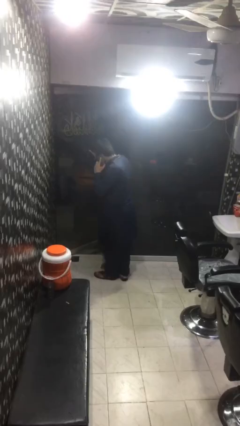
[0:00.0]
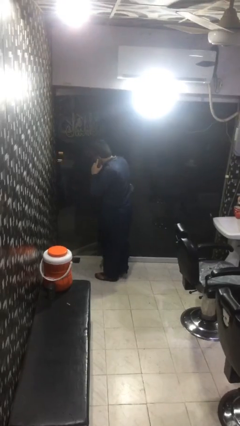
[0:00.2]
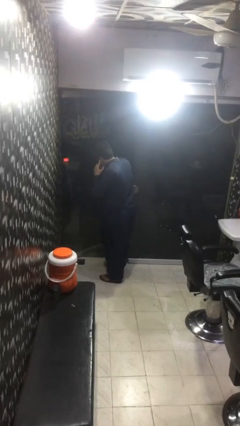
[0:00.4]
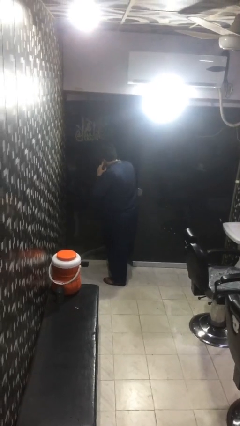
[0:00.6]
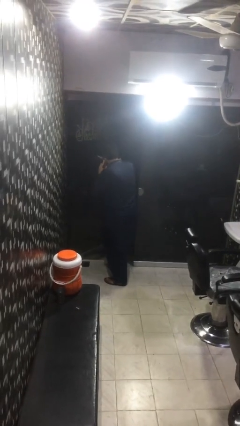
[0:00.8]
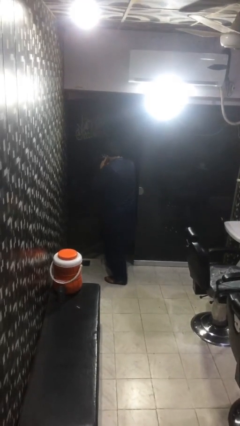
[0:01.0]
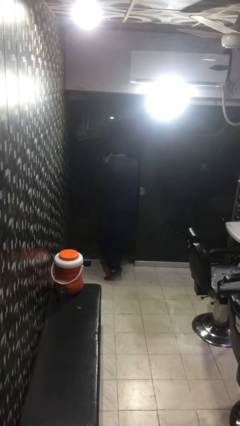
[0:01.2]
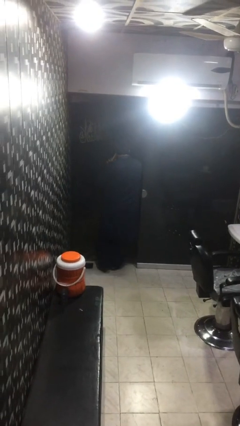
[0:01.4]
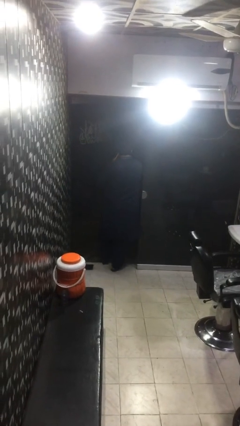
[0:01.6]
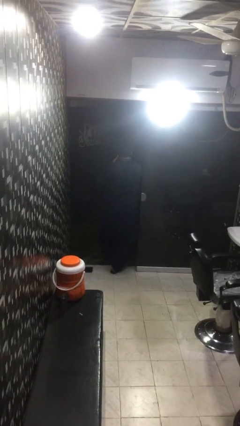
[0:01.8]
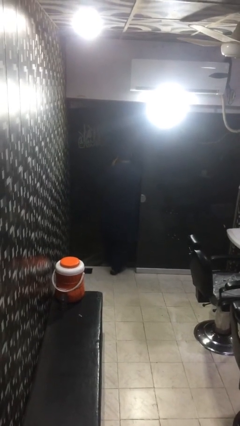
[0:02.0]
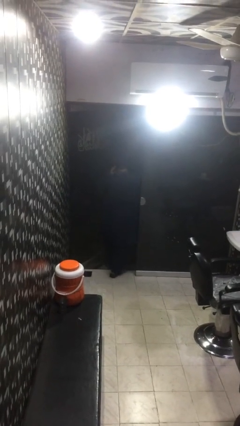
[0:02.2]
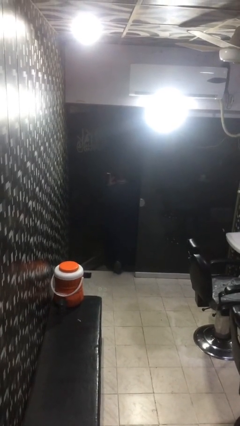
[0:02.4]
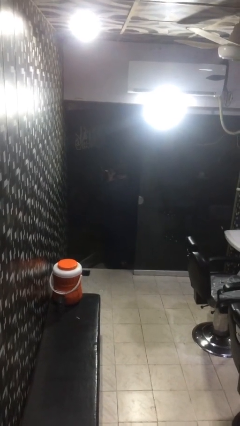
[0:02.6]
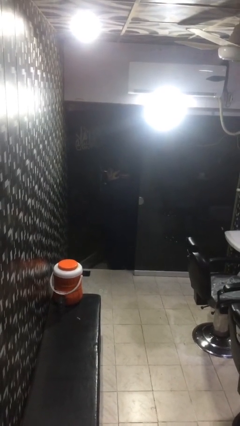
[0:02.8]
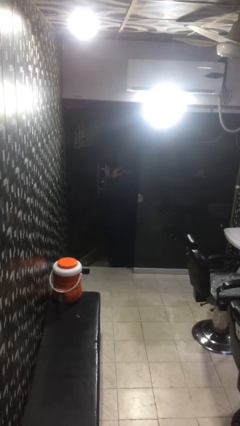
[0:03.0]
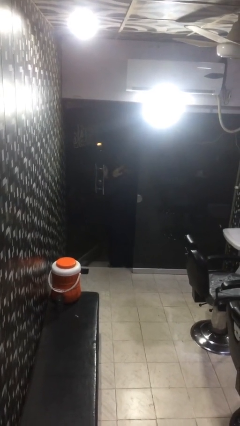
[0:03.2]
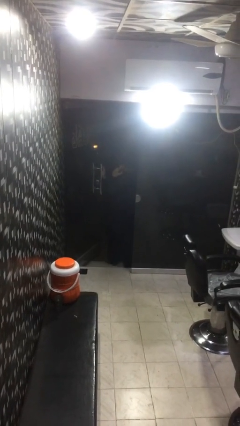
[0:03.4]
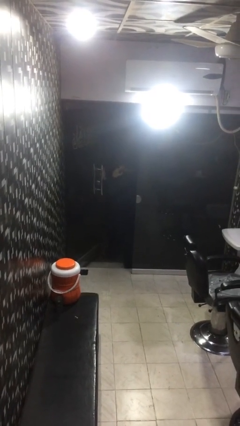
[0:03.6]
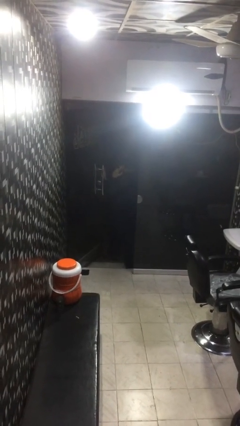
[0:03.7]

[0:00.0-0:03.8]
person exits scene through structure

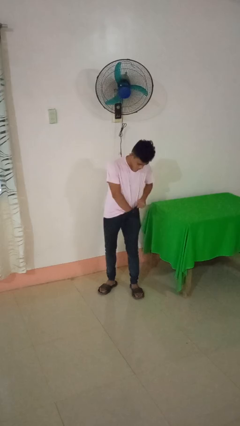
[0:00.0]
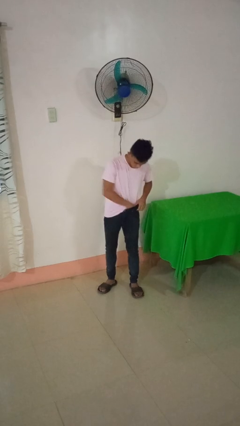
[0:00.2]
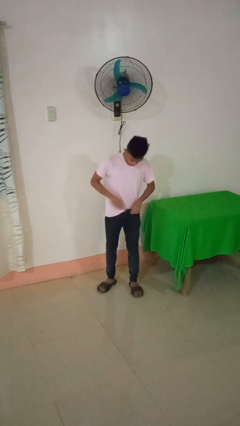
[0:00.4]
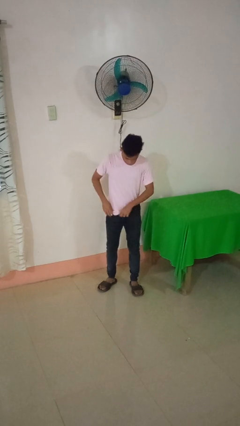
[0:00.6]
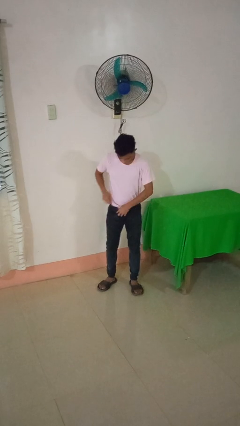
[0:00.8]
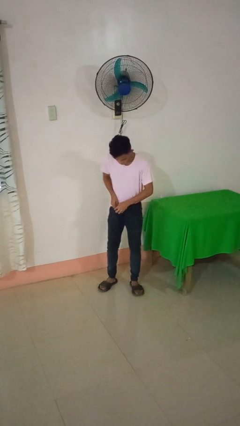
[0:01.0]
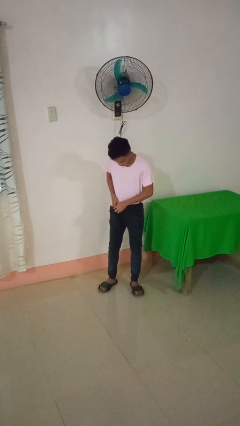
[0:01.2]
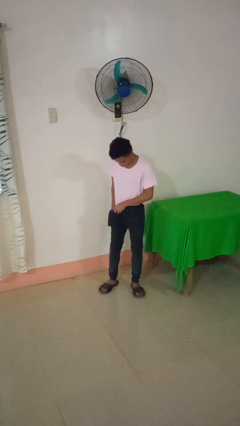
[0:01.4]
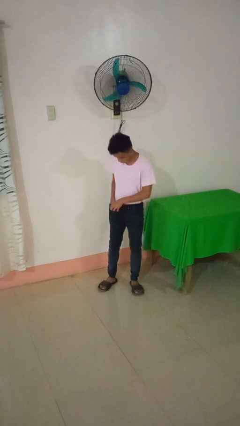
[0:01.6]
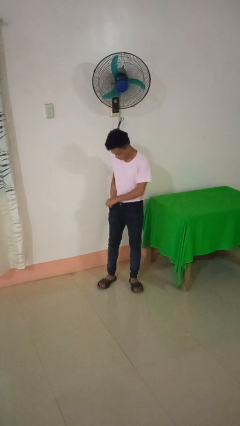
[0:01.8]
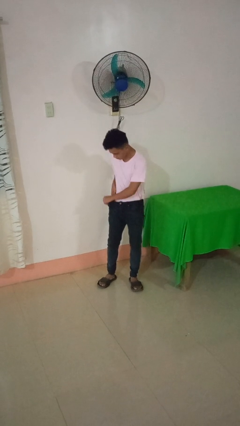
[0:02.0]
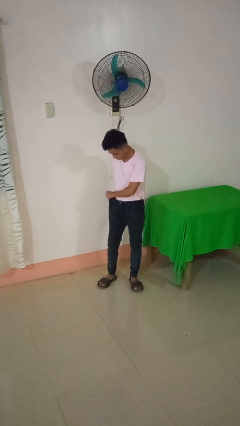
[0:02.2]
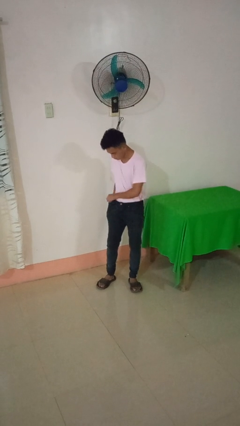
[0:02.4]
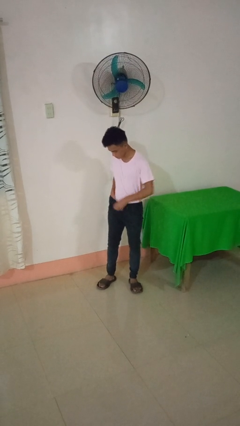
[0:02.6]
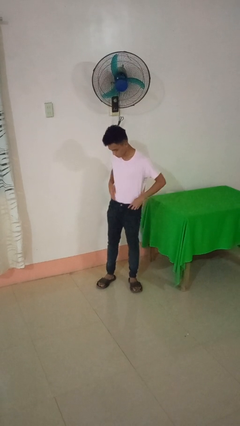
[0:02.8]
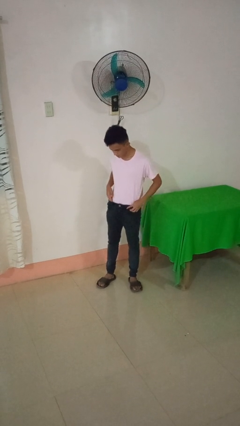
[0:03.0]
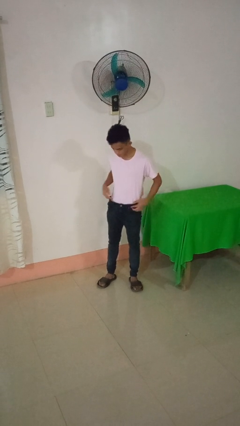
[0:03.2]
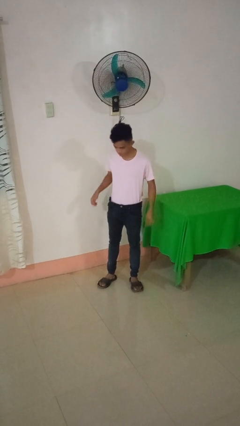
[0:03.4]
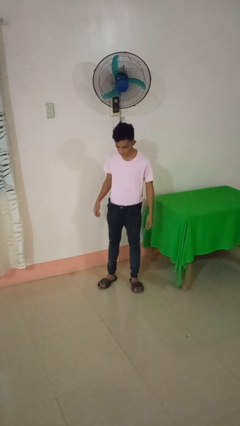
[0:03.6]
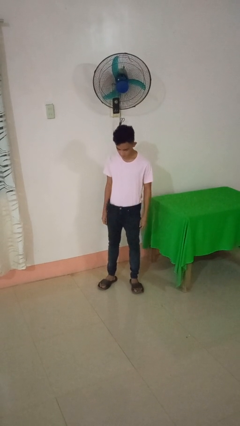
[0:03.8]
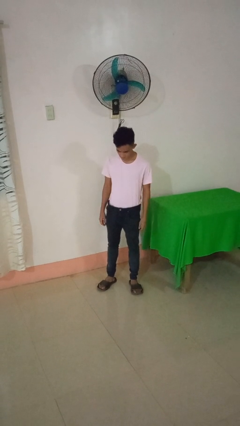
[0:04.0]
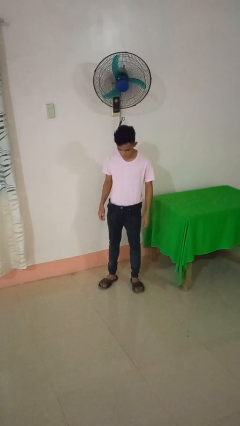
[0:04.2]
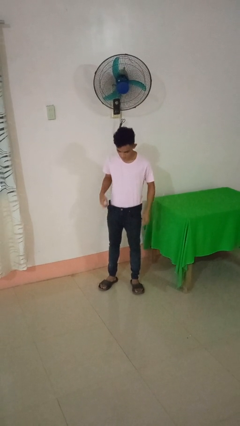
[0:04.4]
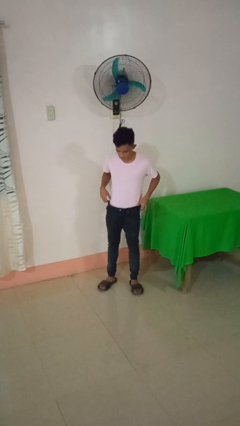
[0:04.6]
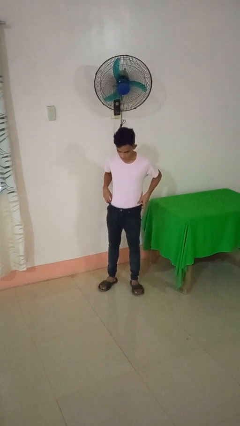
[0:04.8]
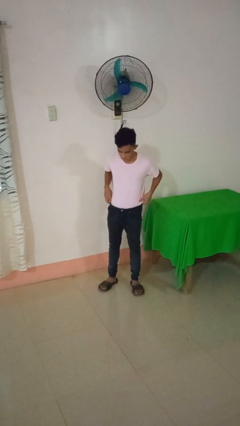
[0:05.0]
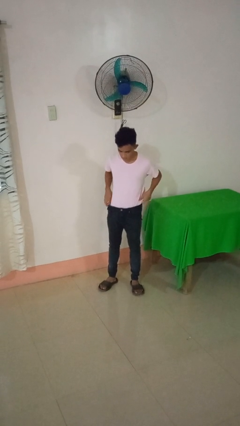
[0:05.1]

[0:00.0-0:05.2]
person tucks in shirt

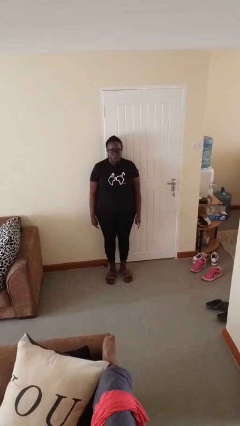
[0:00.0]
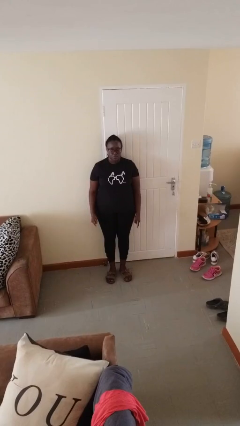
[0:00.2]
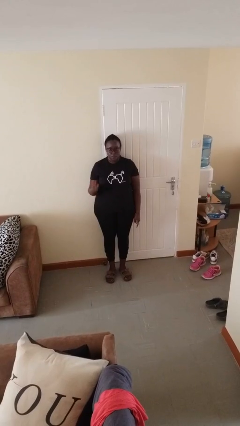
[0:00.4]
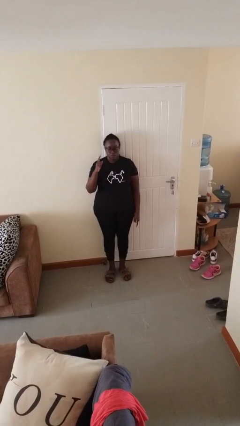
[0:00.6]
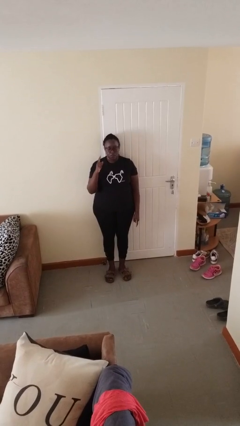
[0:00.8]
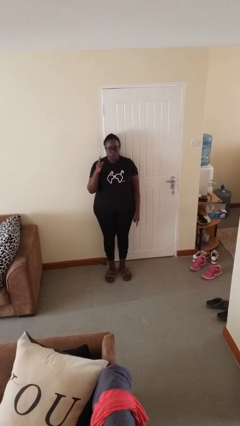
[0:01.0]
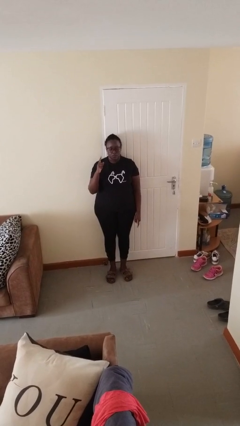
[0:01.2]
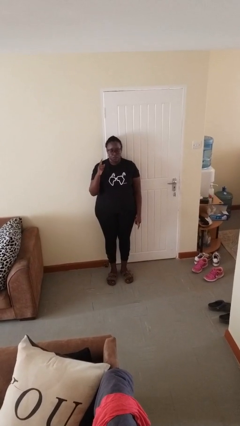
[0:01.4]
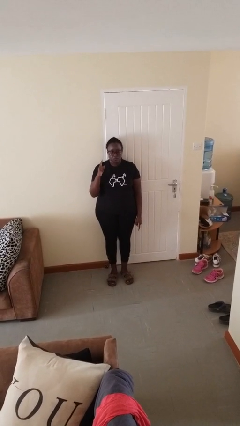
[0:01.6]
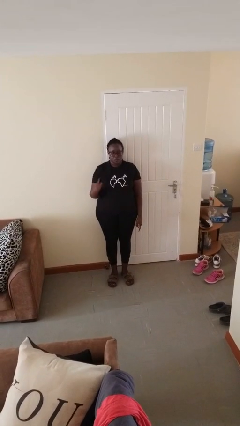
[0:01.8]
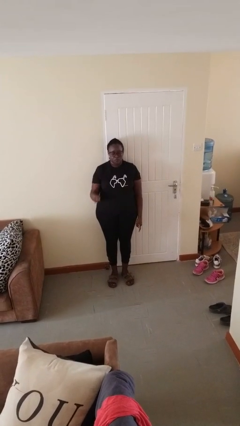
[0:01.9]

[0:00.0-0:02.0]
person gestures number one

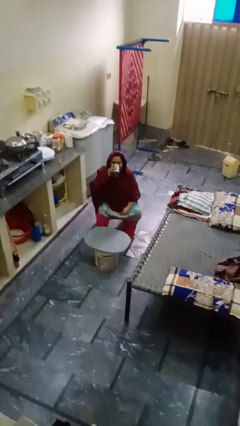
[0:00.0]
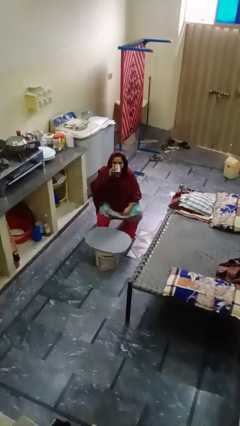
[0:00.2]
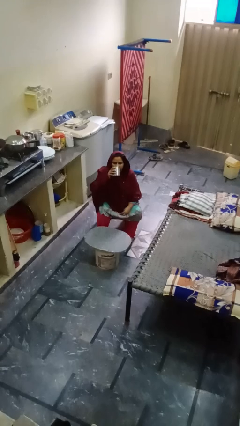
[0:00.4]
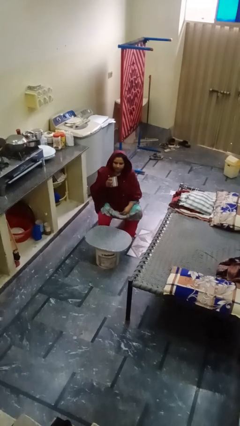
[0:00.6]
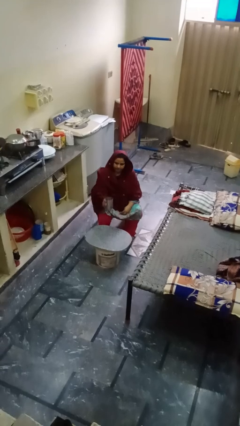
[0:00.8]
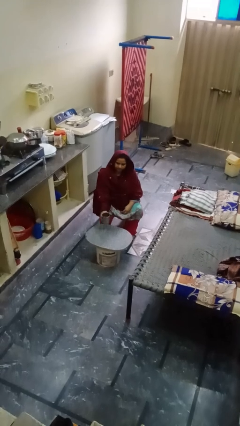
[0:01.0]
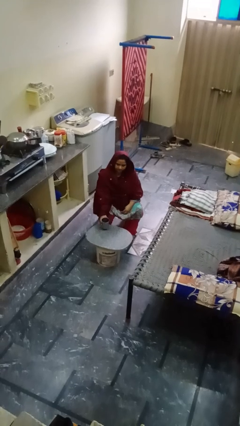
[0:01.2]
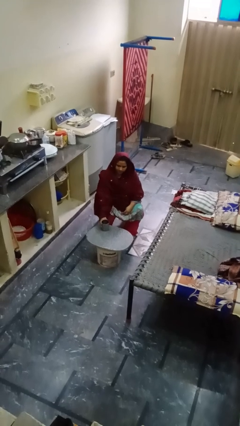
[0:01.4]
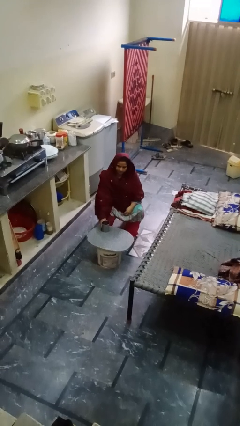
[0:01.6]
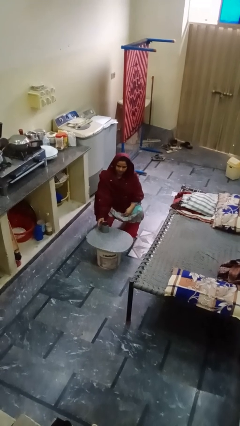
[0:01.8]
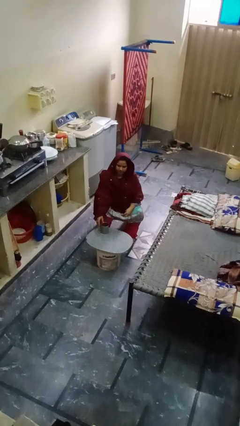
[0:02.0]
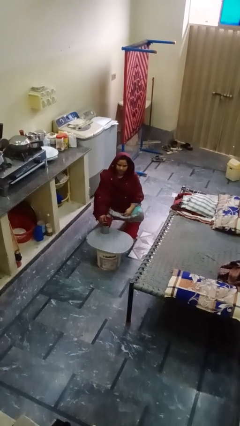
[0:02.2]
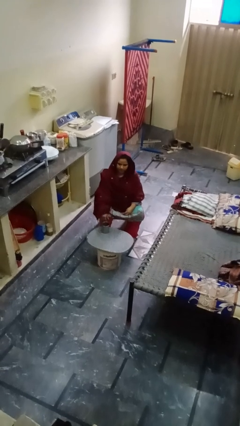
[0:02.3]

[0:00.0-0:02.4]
person puts down object on table

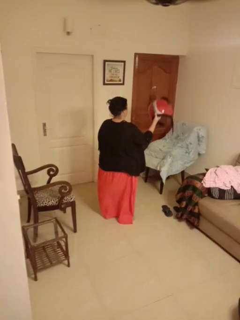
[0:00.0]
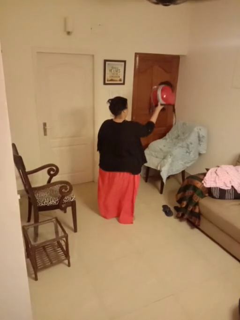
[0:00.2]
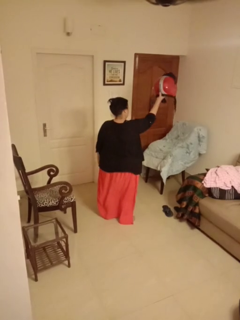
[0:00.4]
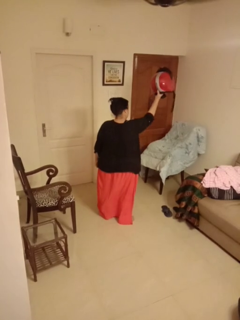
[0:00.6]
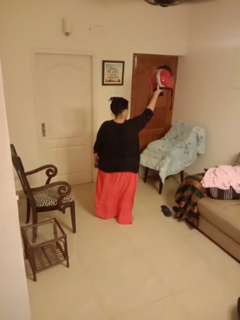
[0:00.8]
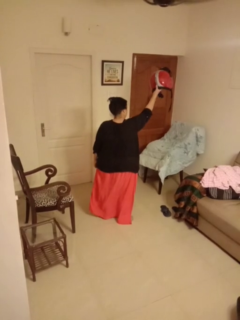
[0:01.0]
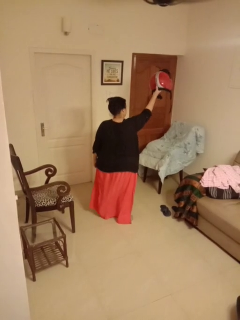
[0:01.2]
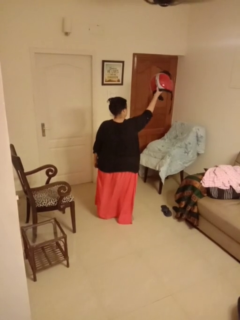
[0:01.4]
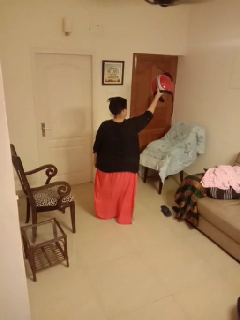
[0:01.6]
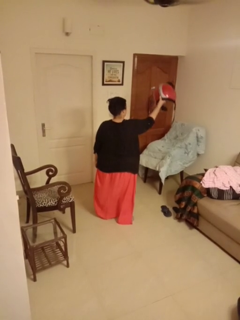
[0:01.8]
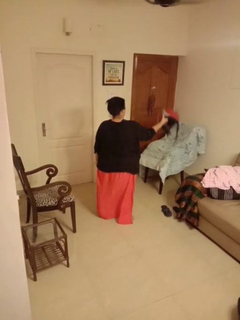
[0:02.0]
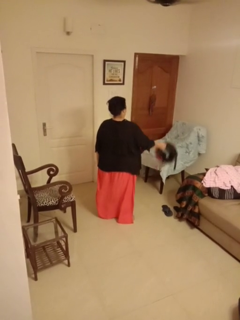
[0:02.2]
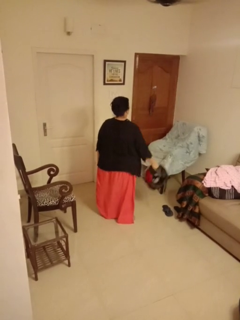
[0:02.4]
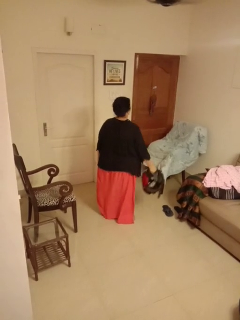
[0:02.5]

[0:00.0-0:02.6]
person holds object above head

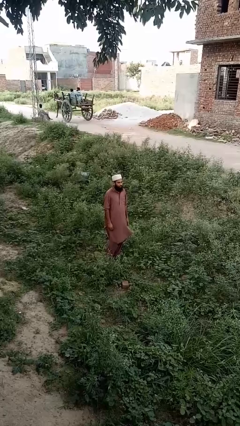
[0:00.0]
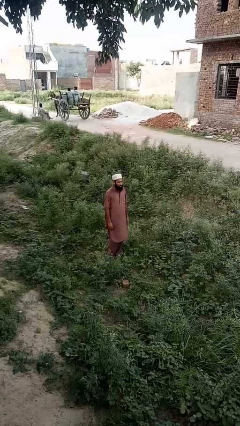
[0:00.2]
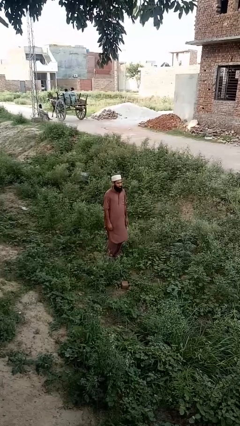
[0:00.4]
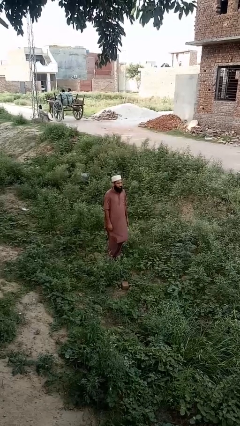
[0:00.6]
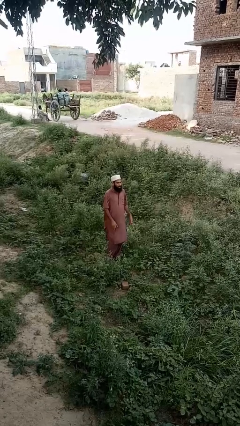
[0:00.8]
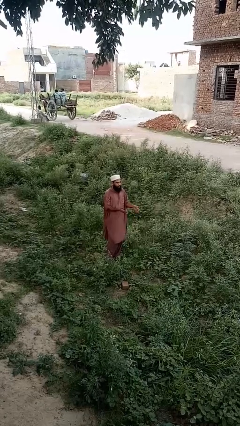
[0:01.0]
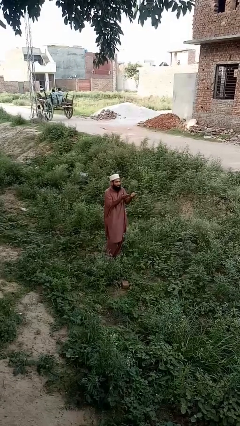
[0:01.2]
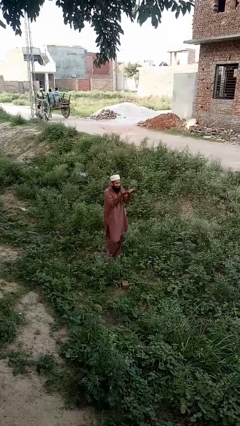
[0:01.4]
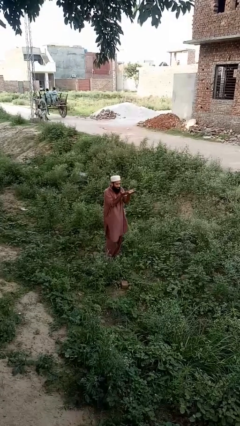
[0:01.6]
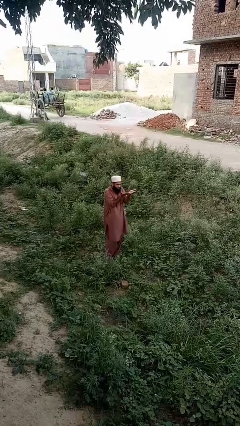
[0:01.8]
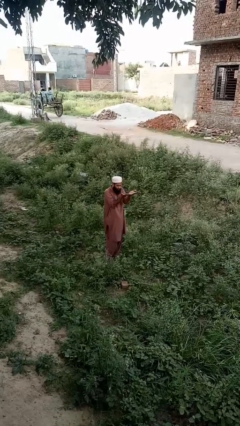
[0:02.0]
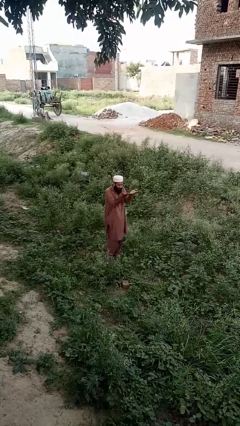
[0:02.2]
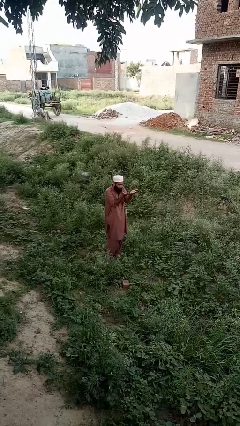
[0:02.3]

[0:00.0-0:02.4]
person prays
